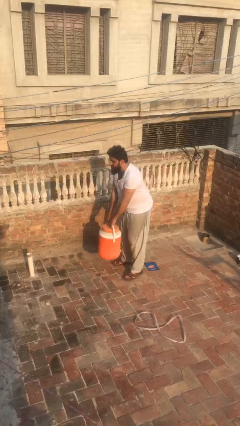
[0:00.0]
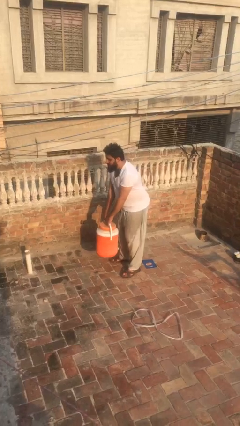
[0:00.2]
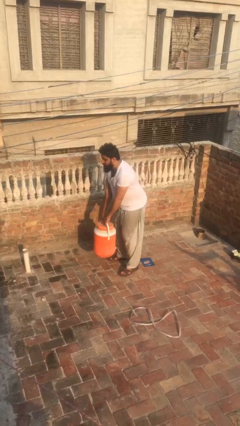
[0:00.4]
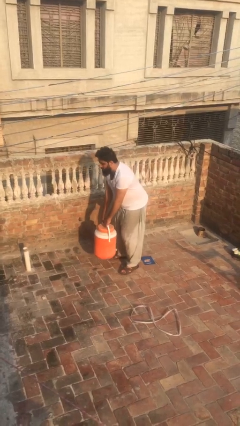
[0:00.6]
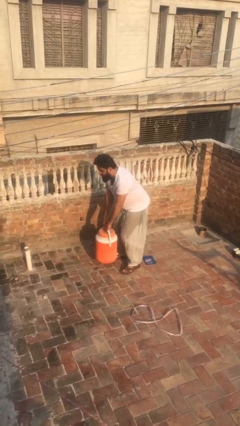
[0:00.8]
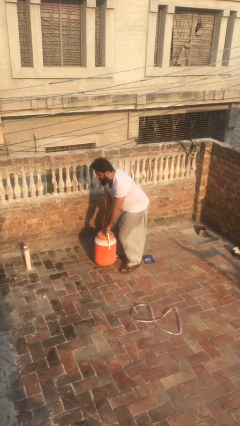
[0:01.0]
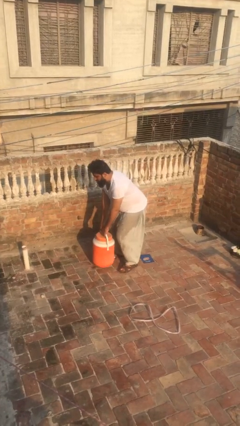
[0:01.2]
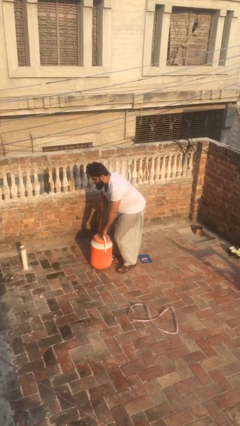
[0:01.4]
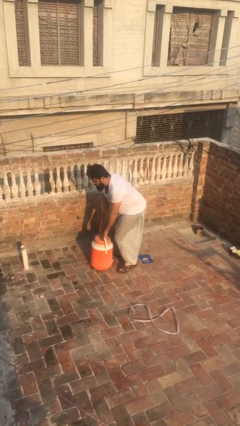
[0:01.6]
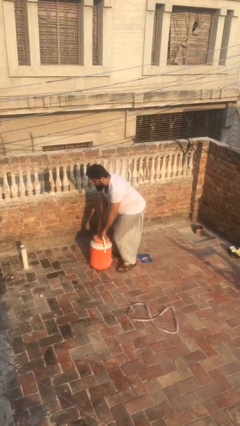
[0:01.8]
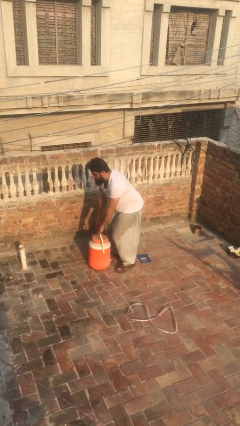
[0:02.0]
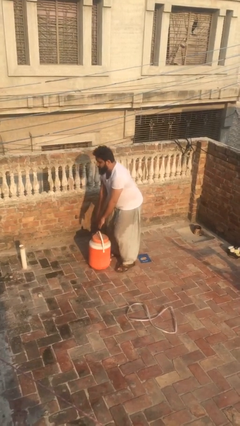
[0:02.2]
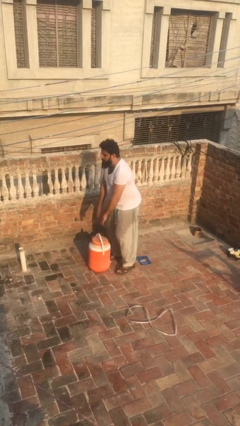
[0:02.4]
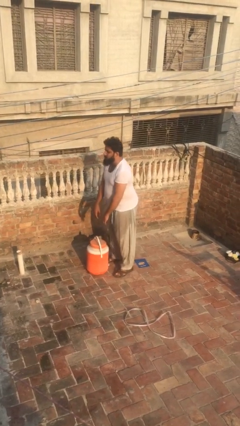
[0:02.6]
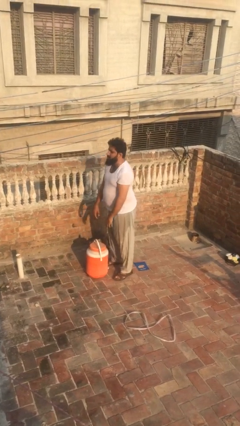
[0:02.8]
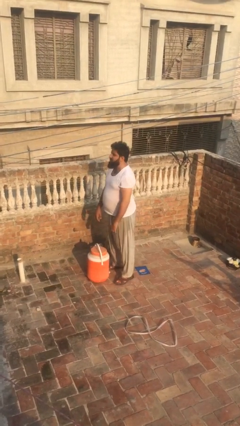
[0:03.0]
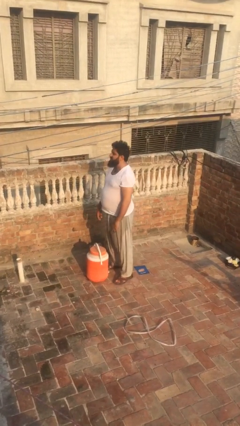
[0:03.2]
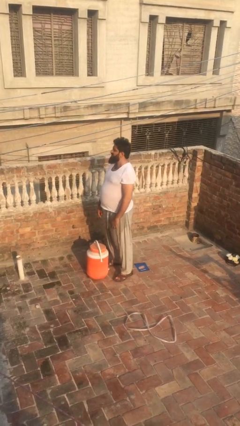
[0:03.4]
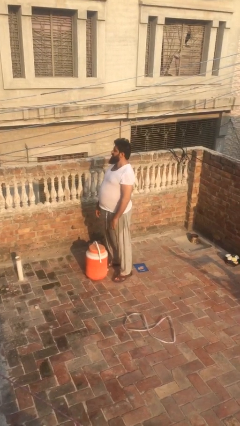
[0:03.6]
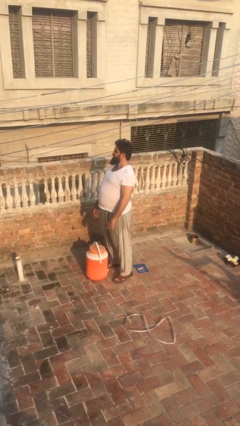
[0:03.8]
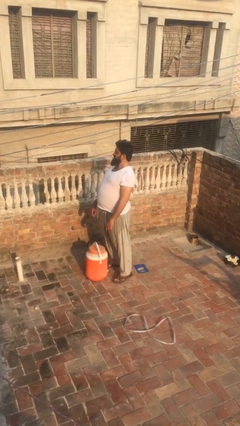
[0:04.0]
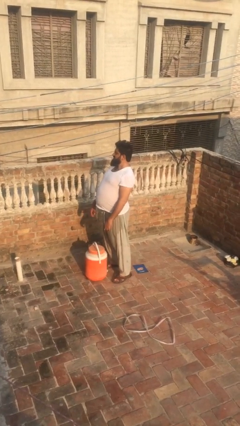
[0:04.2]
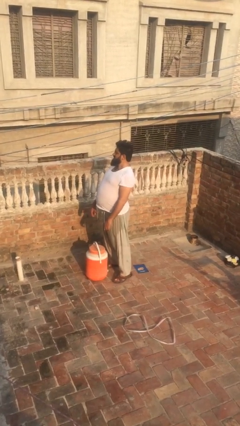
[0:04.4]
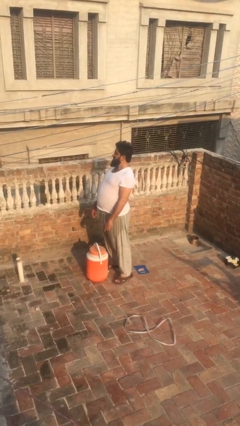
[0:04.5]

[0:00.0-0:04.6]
person puts down object on floor

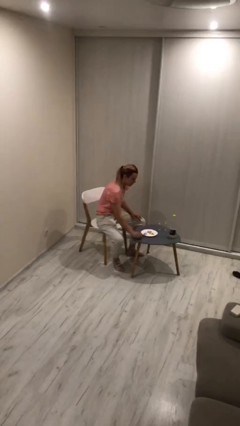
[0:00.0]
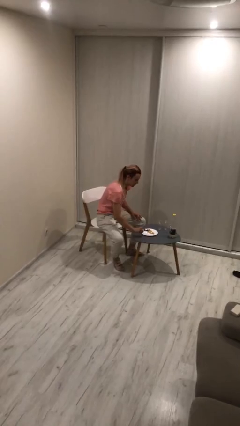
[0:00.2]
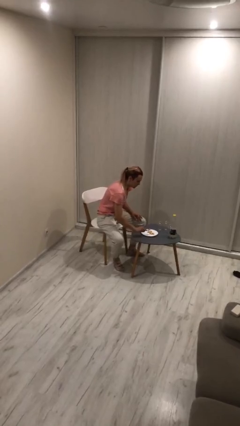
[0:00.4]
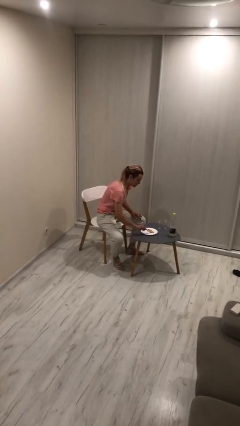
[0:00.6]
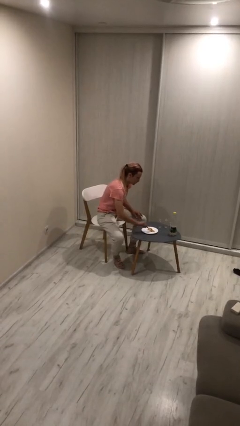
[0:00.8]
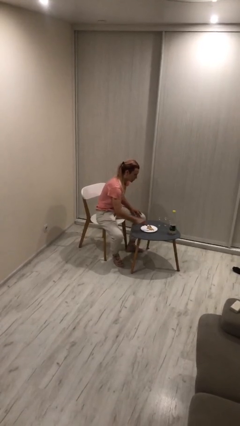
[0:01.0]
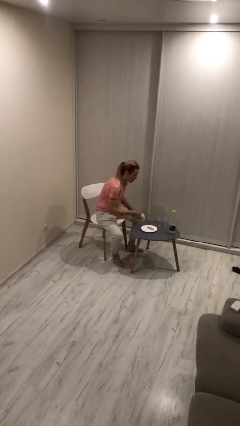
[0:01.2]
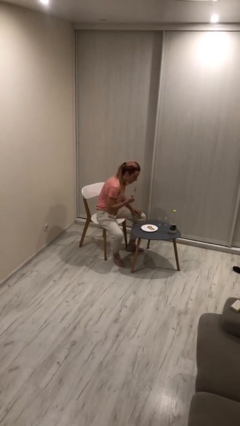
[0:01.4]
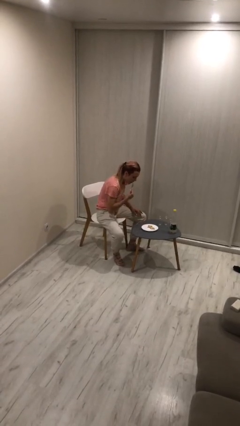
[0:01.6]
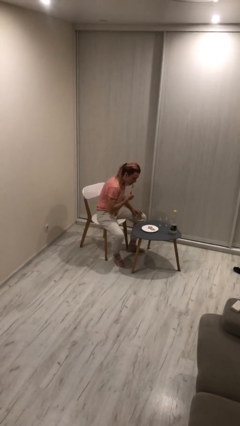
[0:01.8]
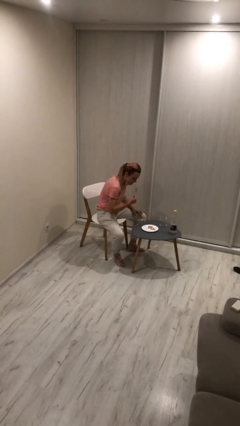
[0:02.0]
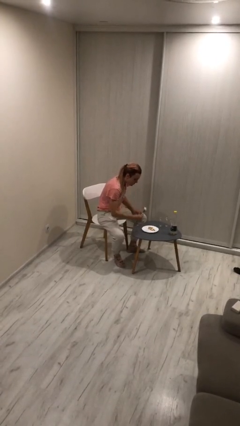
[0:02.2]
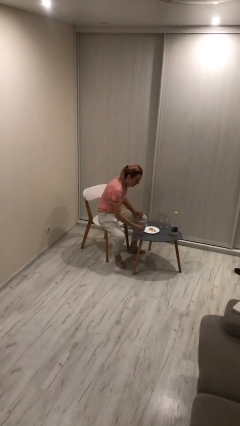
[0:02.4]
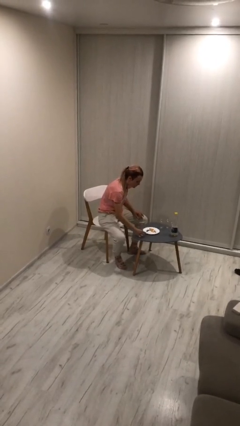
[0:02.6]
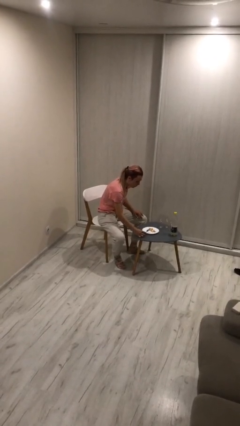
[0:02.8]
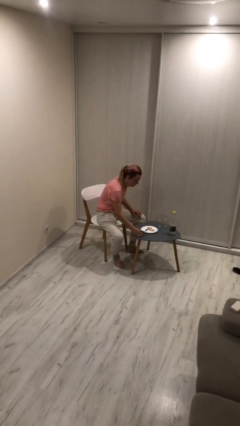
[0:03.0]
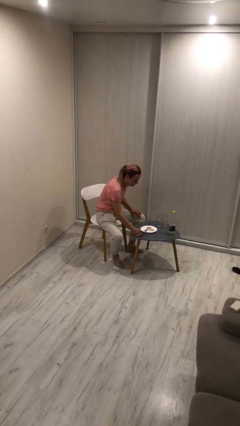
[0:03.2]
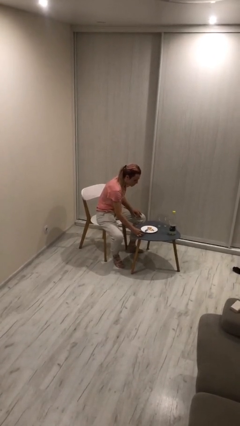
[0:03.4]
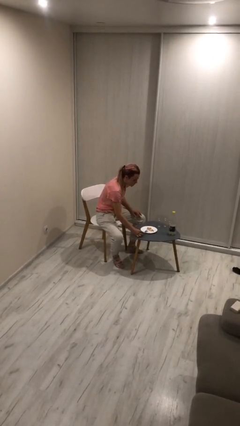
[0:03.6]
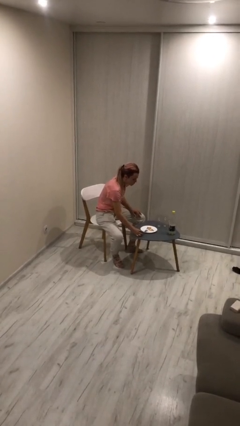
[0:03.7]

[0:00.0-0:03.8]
person eats with utensil

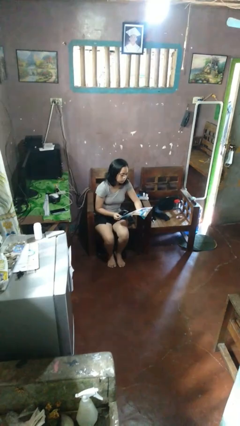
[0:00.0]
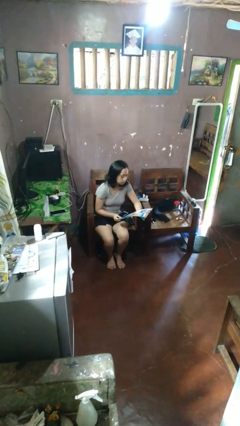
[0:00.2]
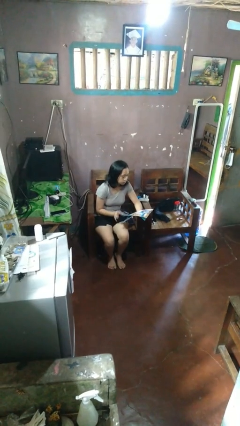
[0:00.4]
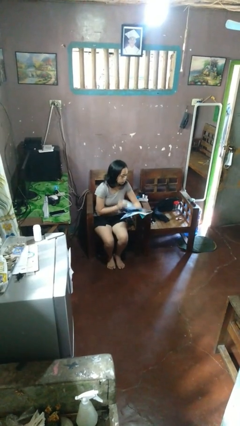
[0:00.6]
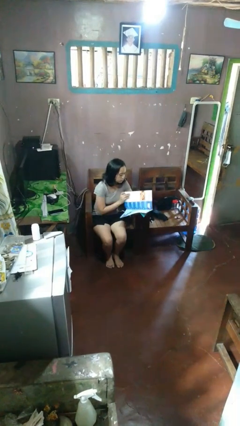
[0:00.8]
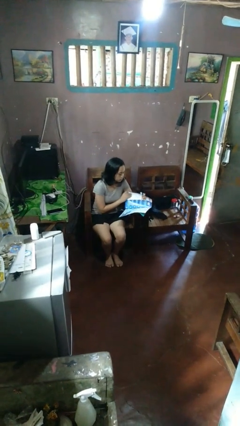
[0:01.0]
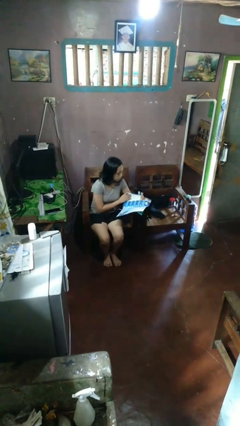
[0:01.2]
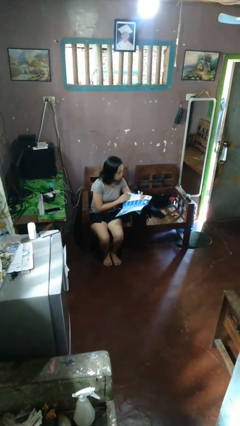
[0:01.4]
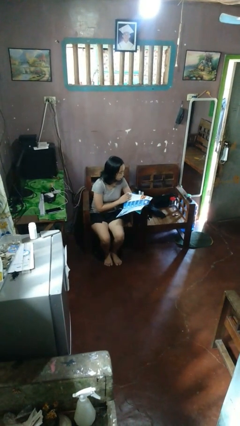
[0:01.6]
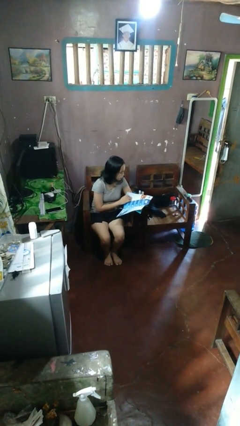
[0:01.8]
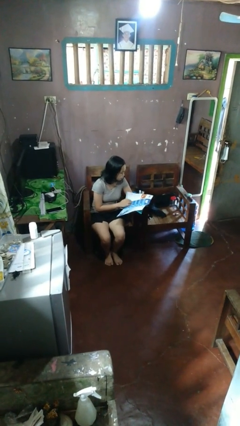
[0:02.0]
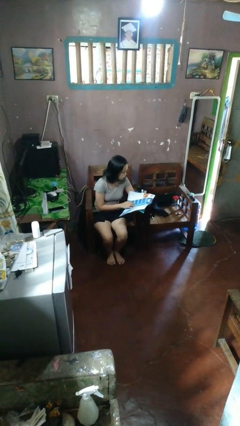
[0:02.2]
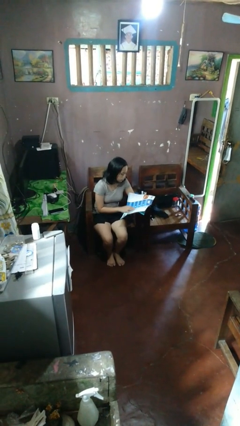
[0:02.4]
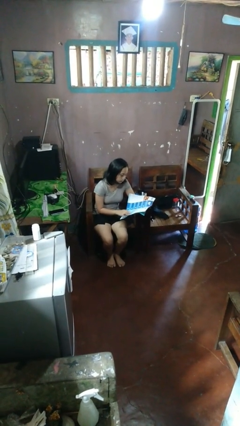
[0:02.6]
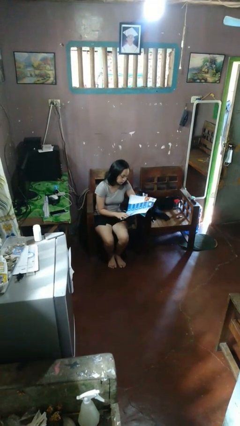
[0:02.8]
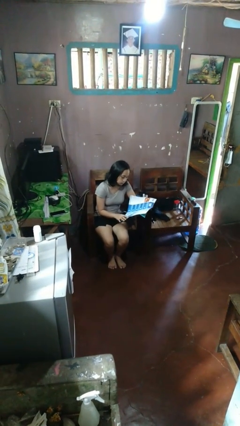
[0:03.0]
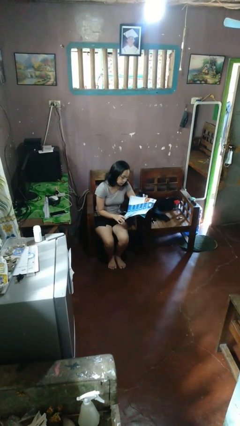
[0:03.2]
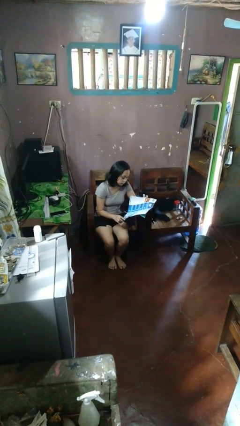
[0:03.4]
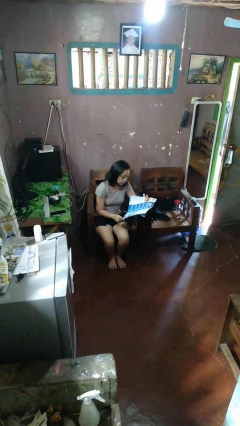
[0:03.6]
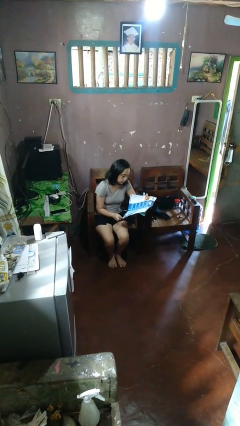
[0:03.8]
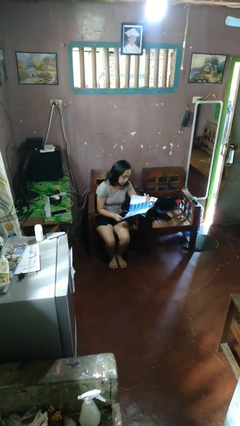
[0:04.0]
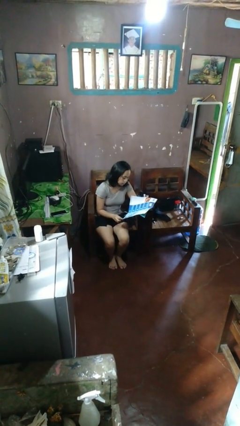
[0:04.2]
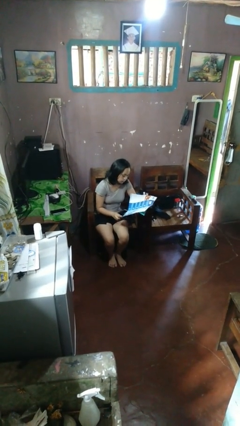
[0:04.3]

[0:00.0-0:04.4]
person reads magazine

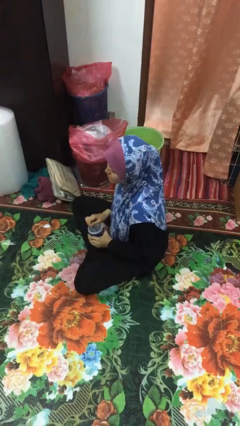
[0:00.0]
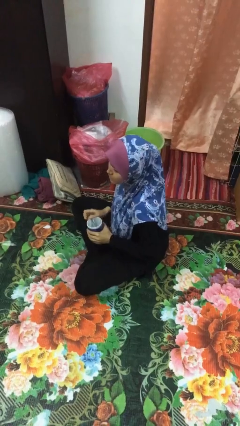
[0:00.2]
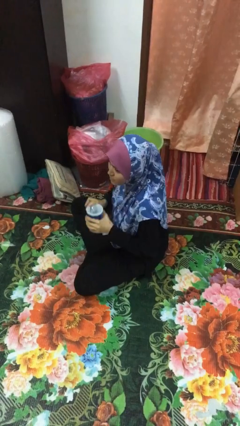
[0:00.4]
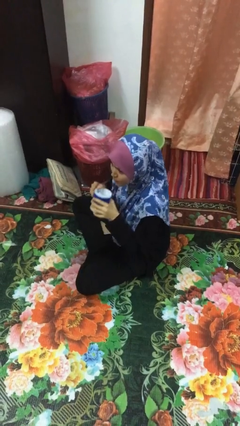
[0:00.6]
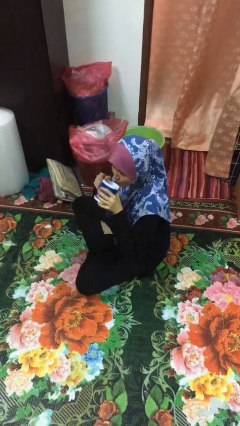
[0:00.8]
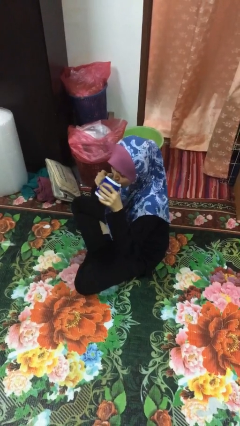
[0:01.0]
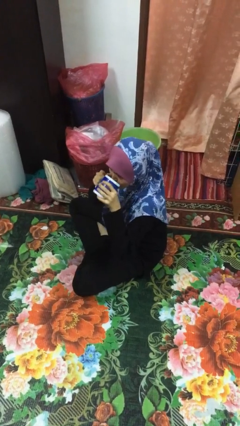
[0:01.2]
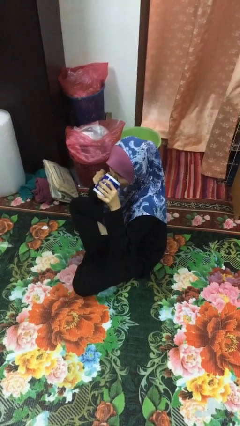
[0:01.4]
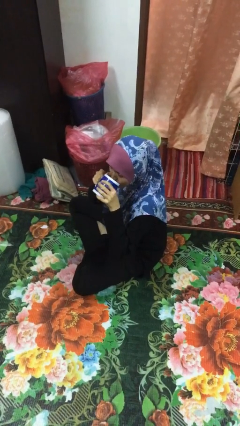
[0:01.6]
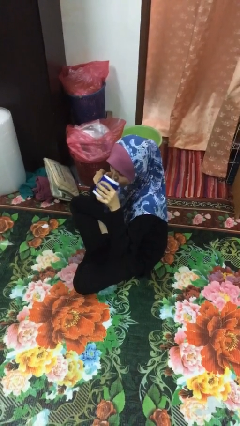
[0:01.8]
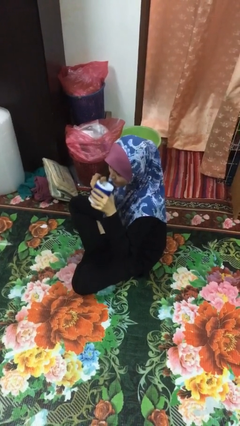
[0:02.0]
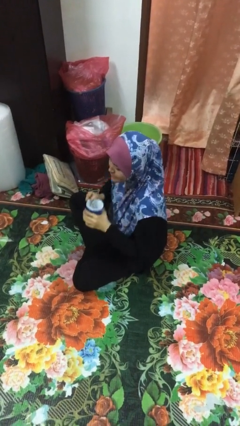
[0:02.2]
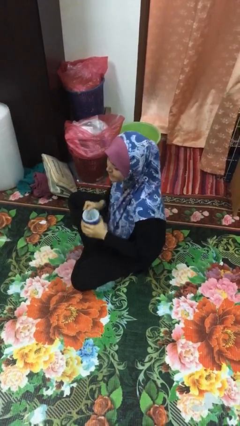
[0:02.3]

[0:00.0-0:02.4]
person drinks from mug

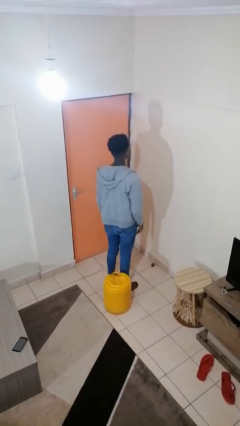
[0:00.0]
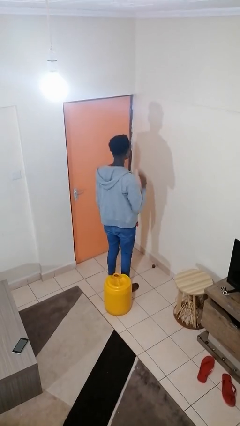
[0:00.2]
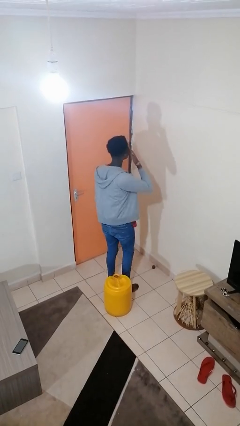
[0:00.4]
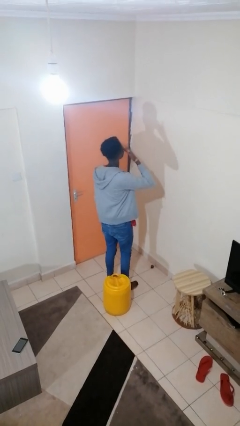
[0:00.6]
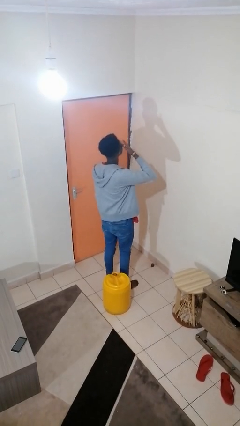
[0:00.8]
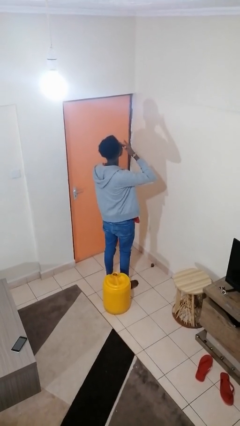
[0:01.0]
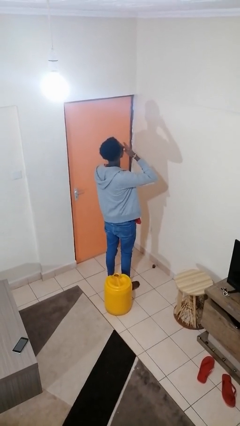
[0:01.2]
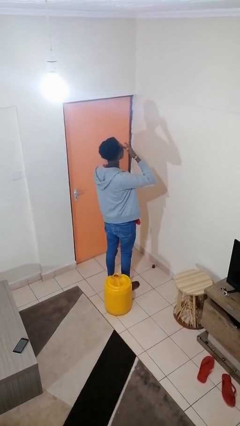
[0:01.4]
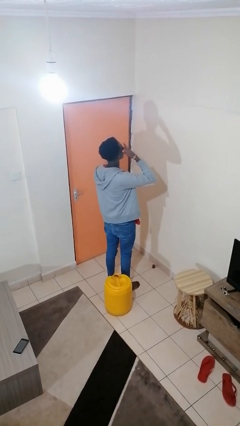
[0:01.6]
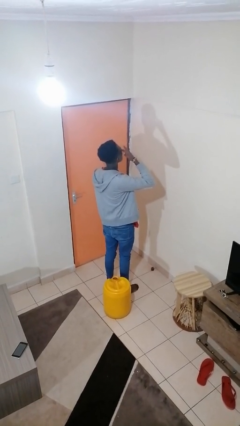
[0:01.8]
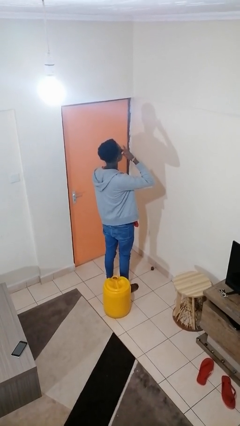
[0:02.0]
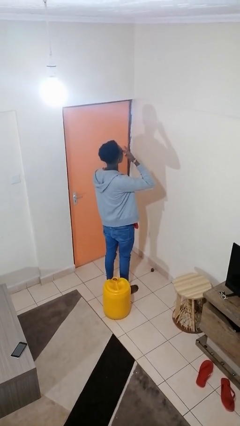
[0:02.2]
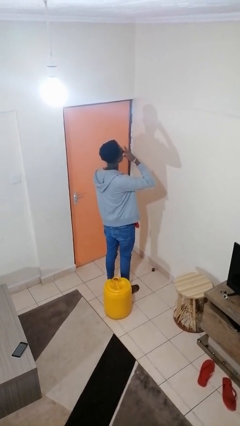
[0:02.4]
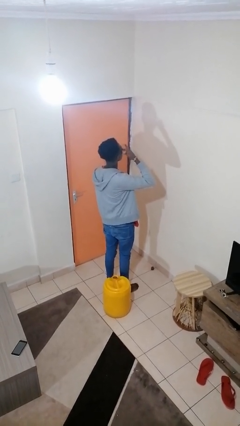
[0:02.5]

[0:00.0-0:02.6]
person rubs eyes
